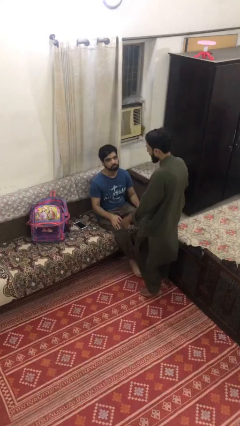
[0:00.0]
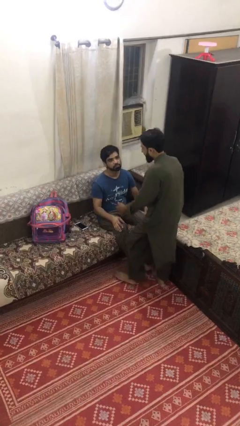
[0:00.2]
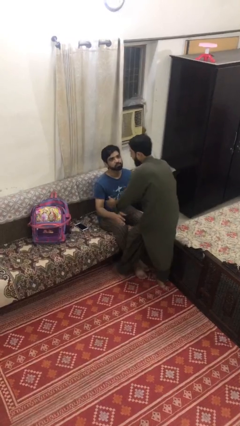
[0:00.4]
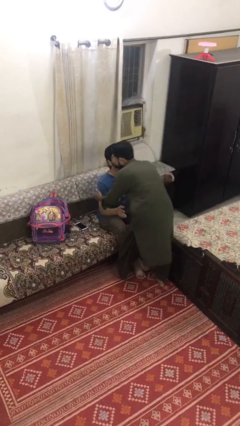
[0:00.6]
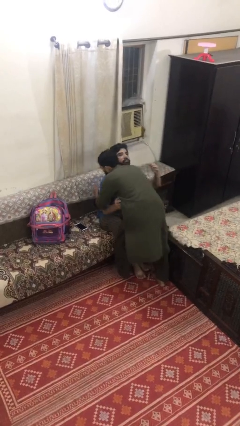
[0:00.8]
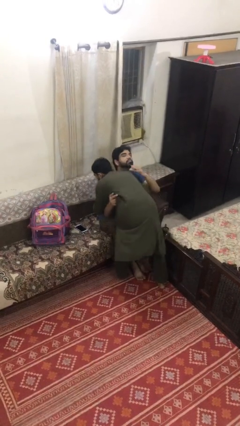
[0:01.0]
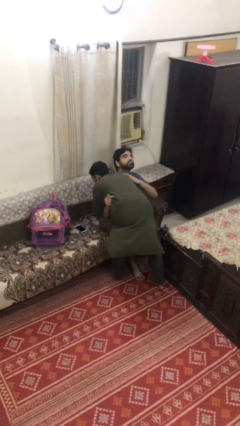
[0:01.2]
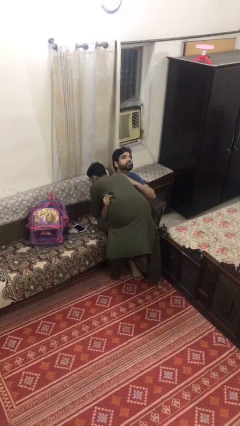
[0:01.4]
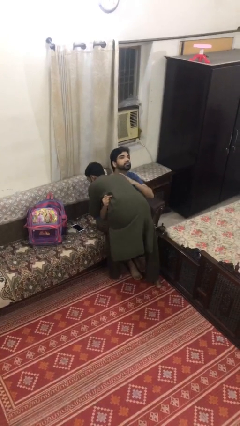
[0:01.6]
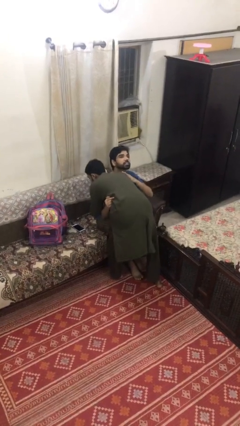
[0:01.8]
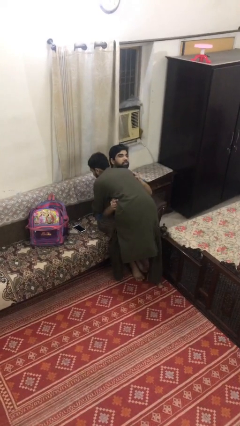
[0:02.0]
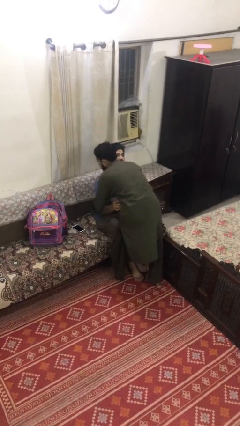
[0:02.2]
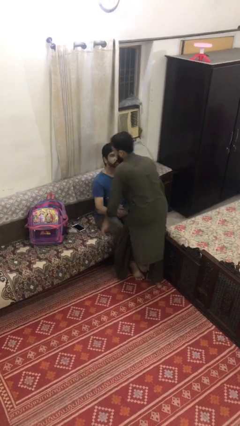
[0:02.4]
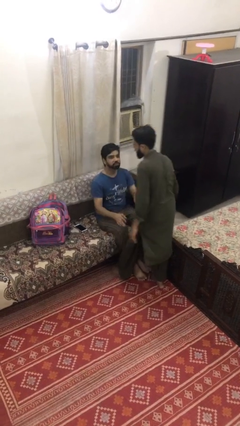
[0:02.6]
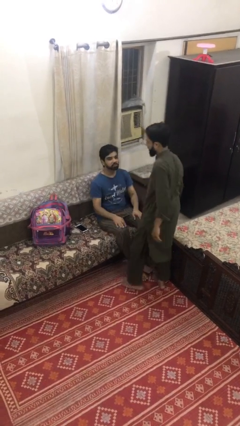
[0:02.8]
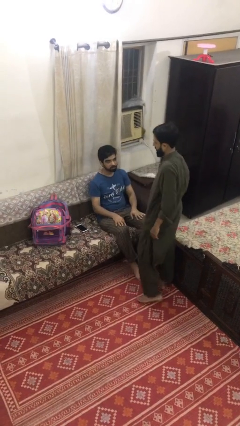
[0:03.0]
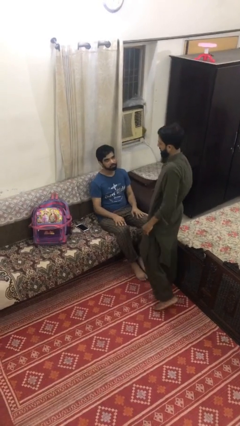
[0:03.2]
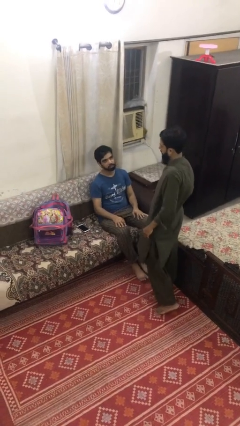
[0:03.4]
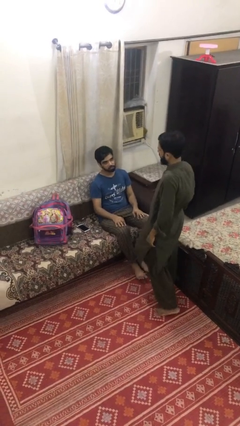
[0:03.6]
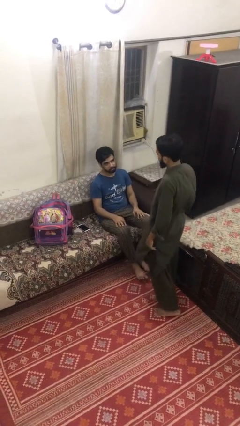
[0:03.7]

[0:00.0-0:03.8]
person embraces person

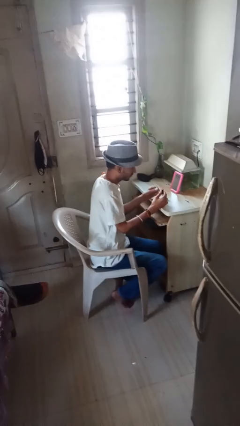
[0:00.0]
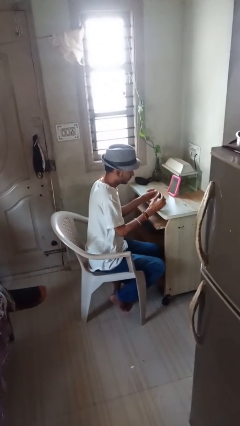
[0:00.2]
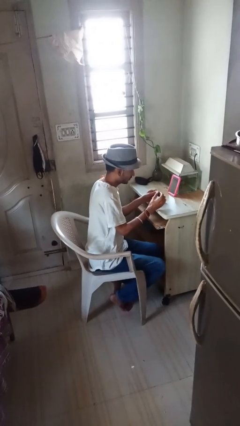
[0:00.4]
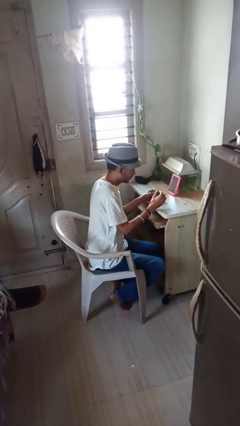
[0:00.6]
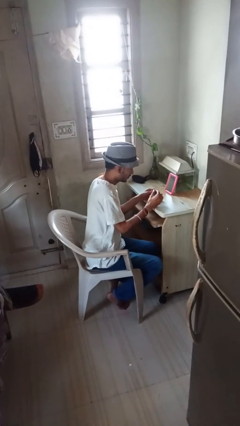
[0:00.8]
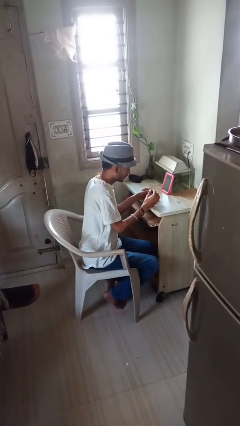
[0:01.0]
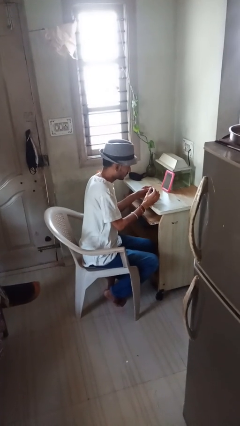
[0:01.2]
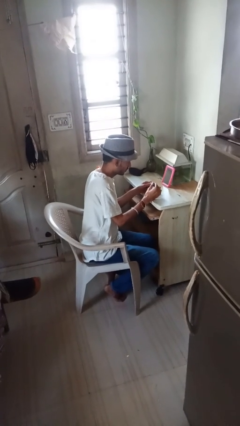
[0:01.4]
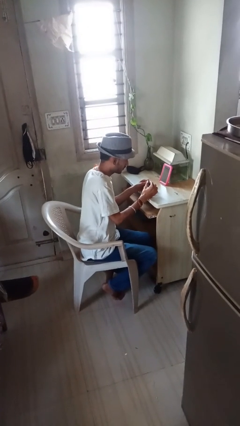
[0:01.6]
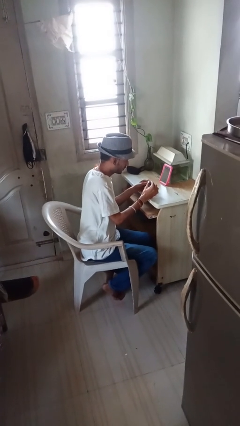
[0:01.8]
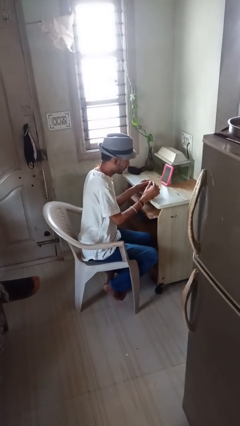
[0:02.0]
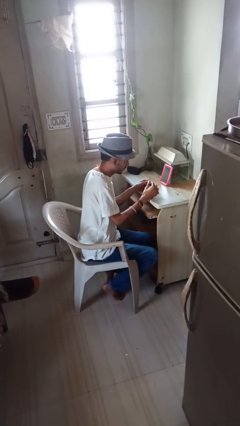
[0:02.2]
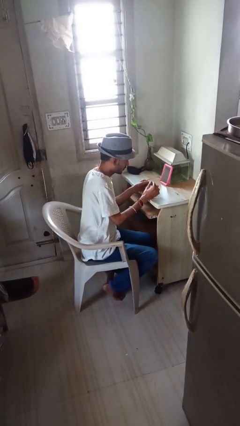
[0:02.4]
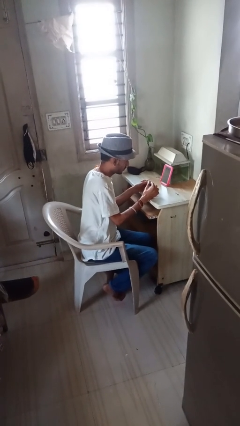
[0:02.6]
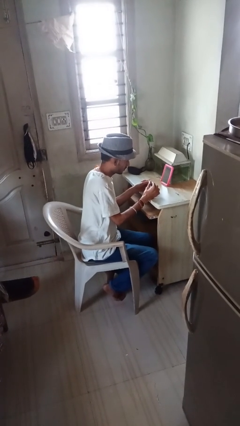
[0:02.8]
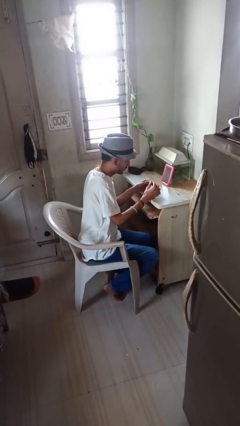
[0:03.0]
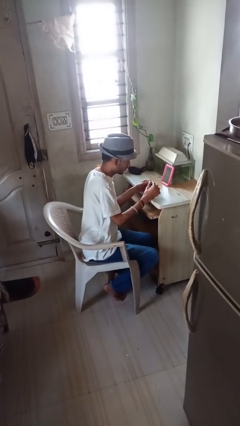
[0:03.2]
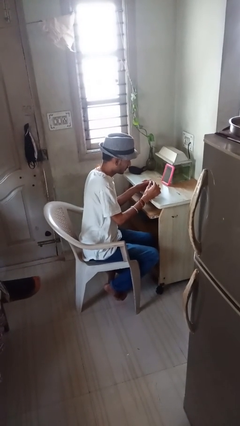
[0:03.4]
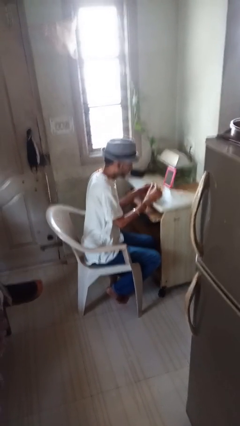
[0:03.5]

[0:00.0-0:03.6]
person paints fingernails

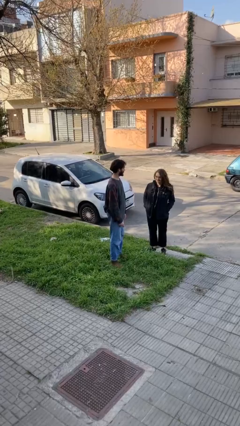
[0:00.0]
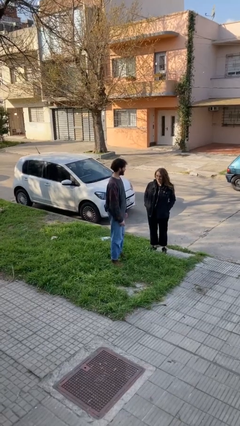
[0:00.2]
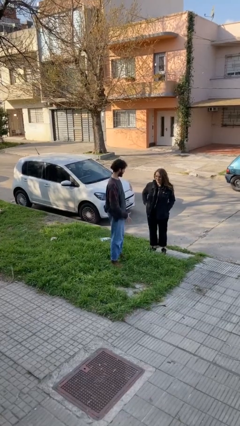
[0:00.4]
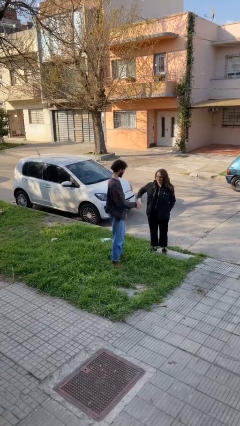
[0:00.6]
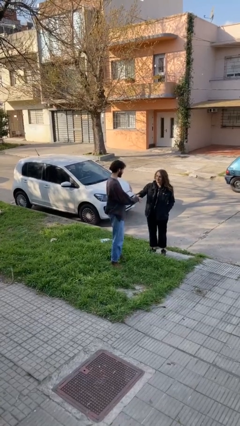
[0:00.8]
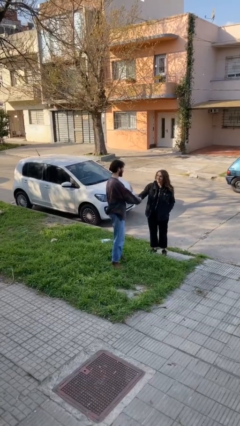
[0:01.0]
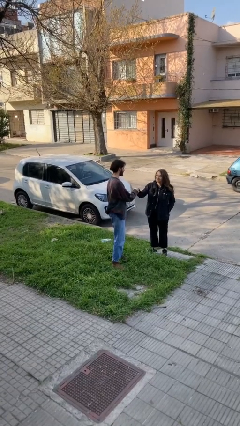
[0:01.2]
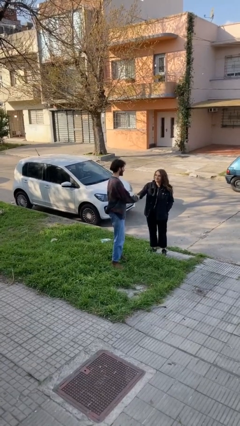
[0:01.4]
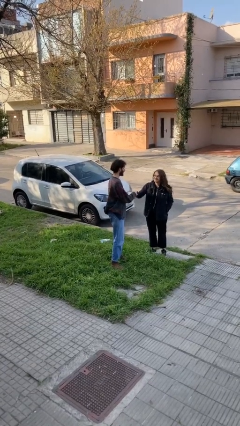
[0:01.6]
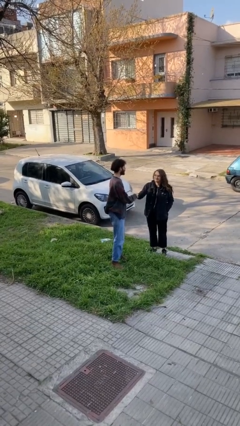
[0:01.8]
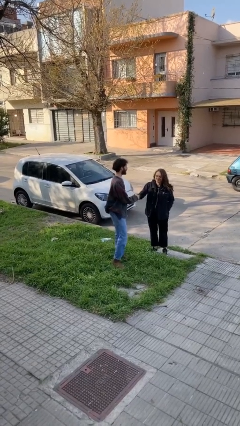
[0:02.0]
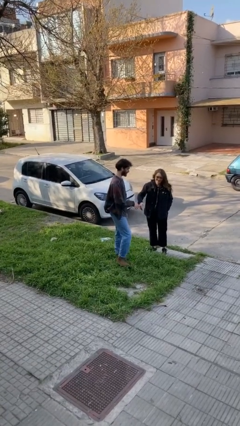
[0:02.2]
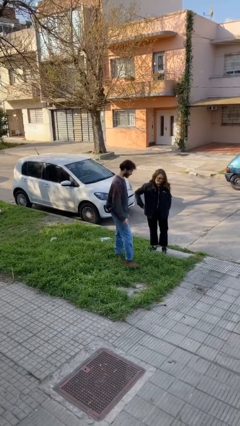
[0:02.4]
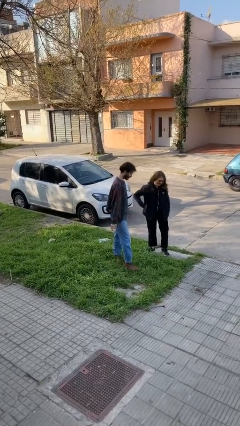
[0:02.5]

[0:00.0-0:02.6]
person shakes hand

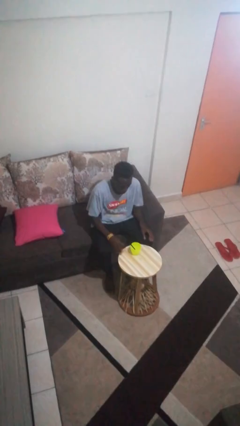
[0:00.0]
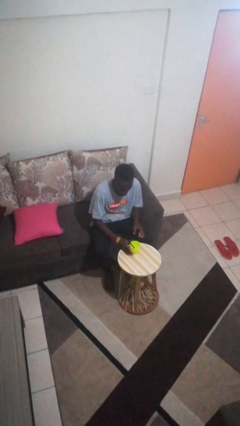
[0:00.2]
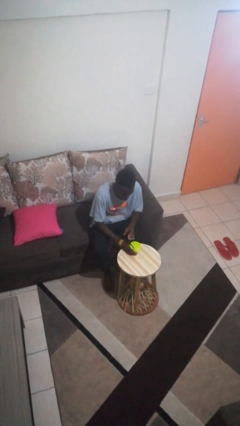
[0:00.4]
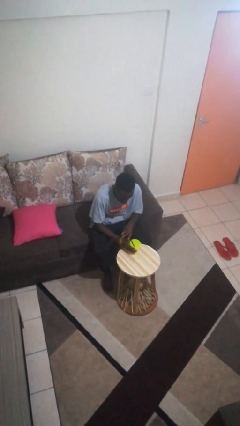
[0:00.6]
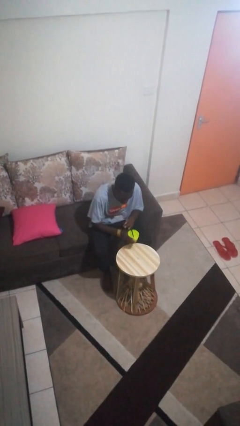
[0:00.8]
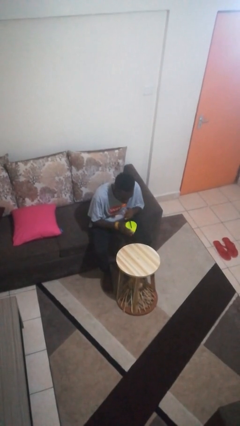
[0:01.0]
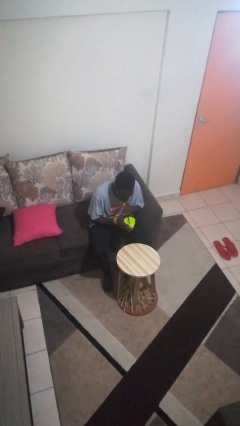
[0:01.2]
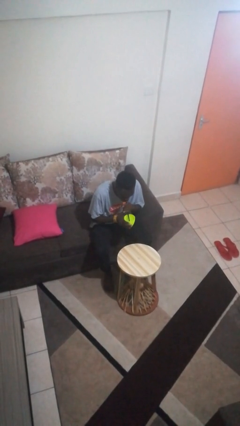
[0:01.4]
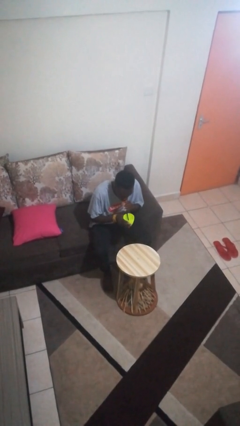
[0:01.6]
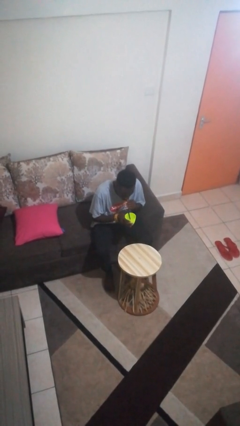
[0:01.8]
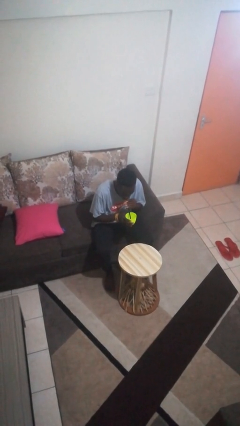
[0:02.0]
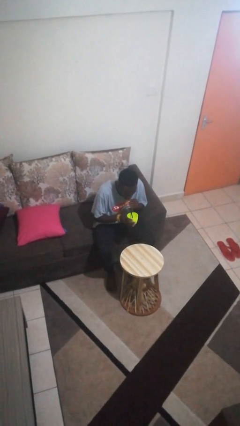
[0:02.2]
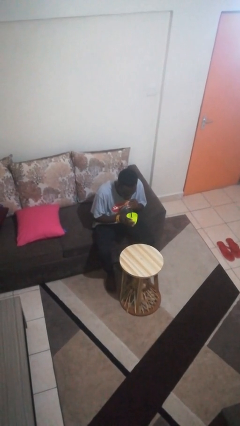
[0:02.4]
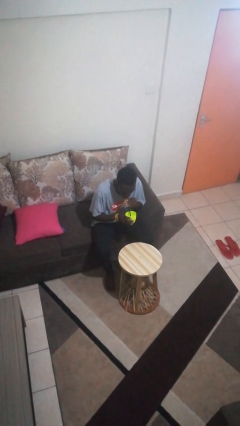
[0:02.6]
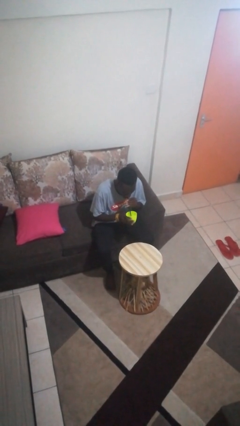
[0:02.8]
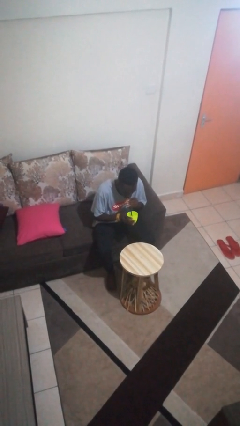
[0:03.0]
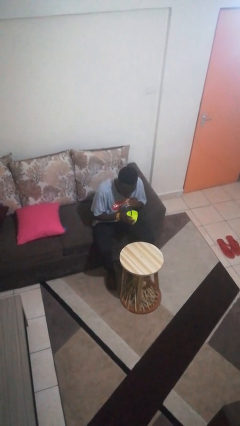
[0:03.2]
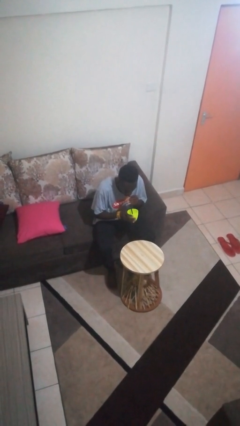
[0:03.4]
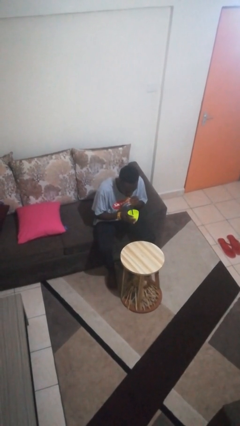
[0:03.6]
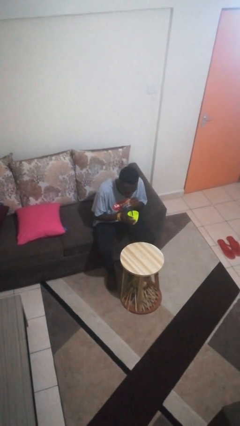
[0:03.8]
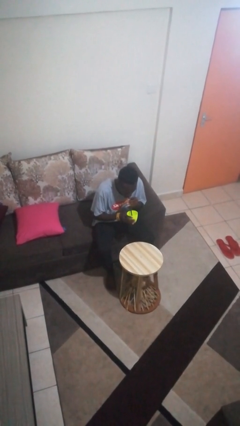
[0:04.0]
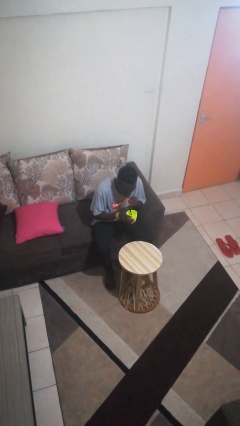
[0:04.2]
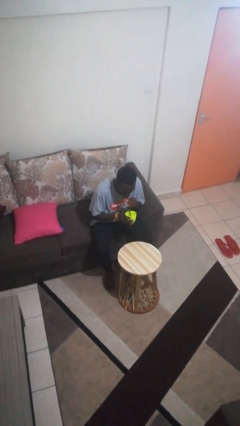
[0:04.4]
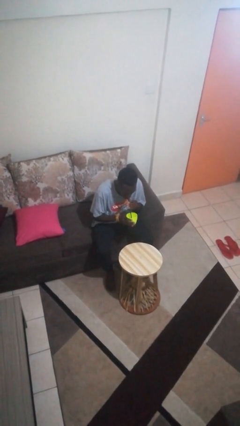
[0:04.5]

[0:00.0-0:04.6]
person drinks from straw

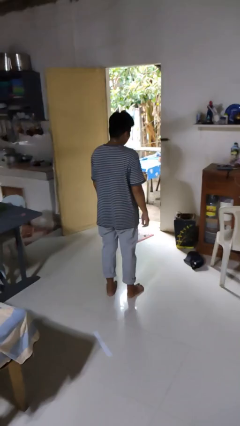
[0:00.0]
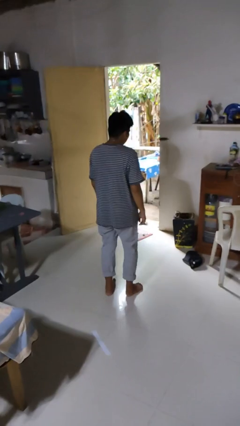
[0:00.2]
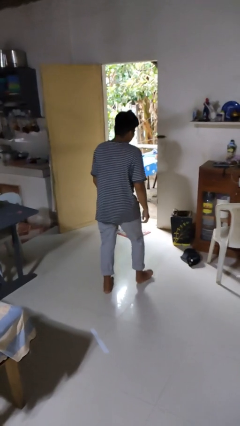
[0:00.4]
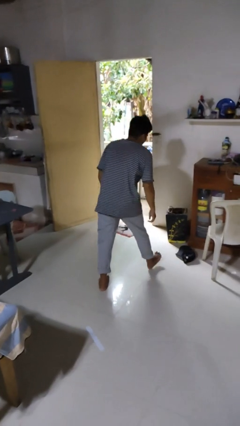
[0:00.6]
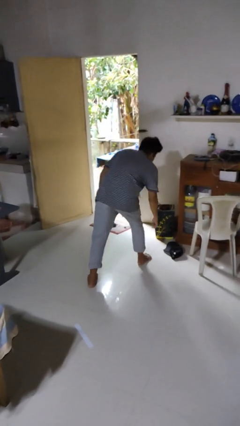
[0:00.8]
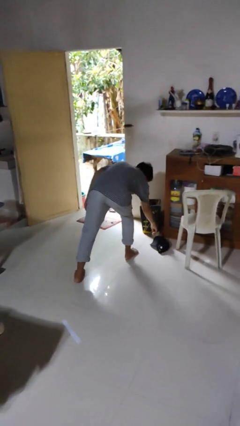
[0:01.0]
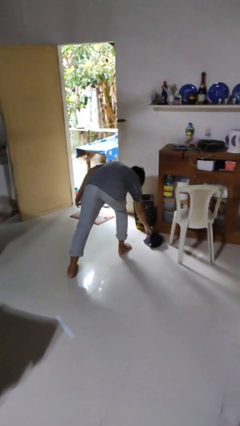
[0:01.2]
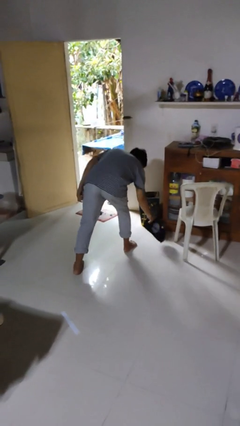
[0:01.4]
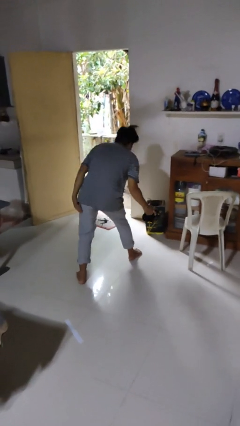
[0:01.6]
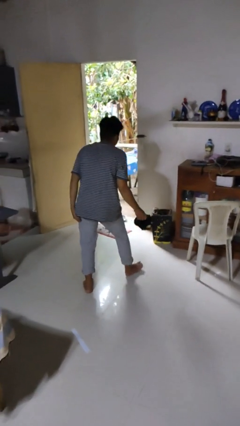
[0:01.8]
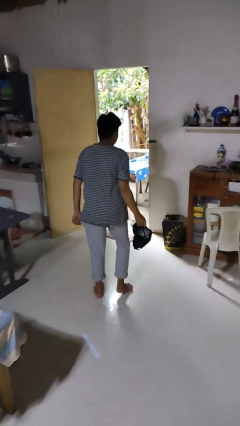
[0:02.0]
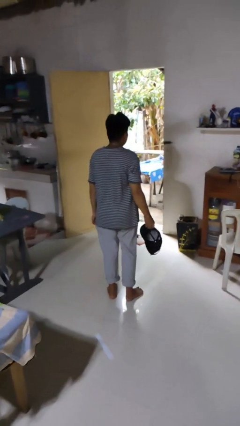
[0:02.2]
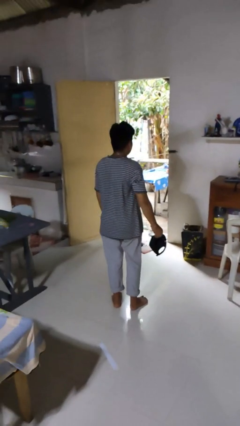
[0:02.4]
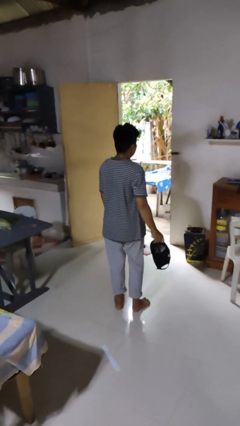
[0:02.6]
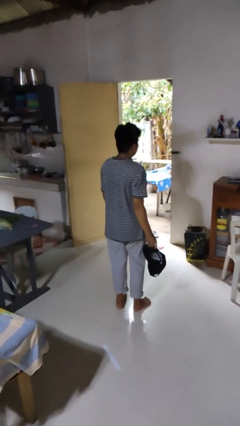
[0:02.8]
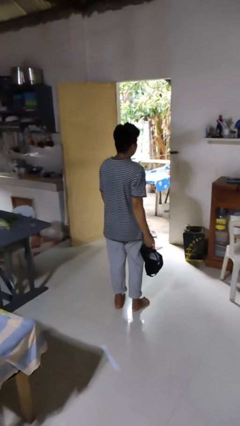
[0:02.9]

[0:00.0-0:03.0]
person picks up object from floor

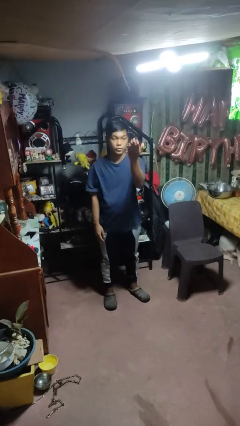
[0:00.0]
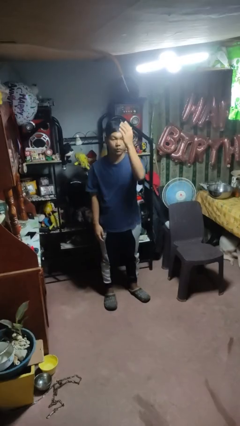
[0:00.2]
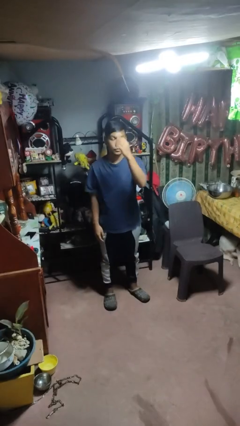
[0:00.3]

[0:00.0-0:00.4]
person gestures swipe up
